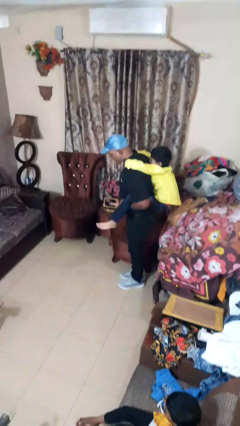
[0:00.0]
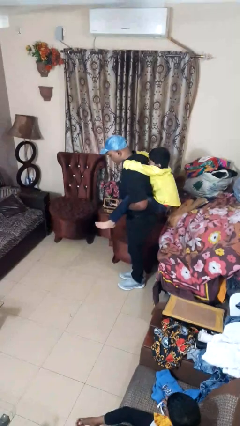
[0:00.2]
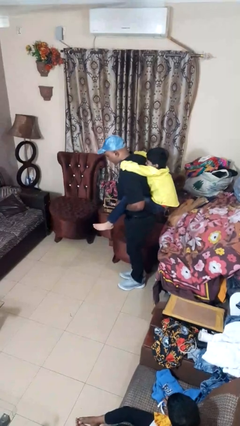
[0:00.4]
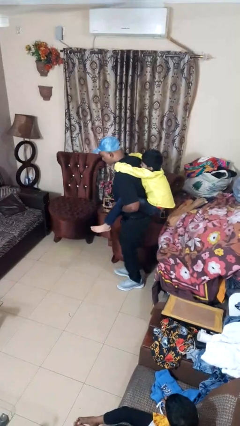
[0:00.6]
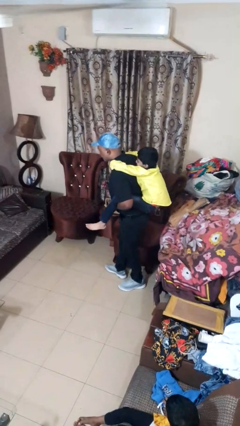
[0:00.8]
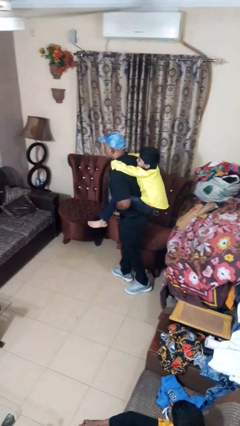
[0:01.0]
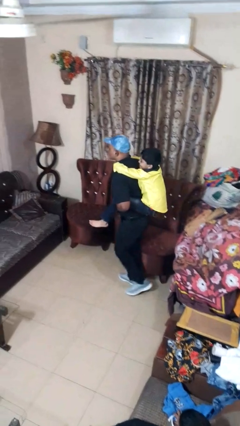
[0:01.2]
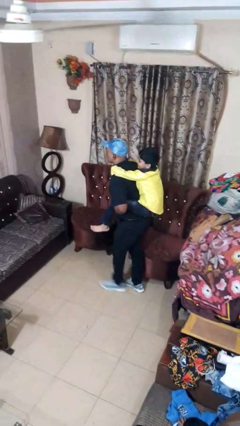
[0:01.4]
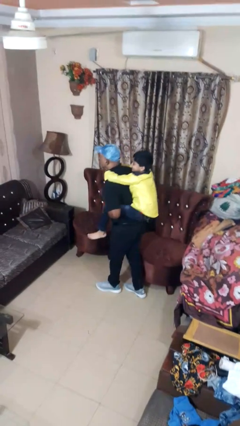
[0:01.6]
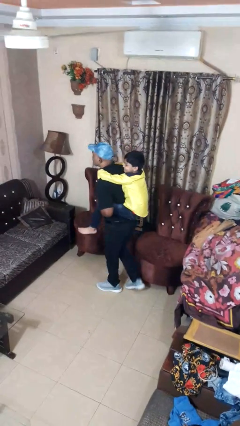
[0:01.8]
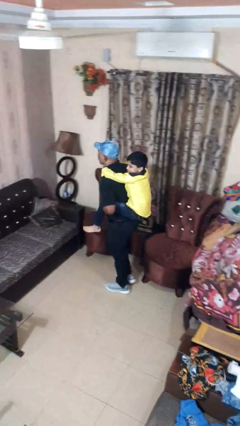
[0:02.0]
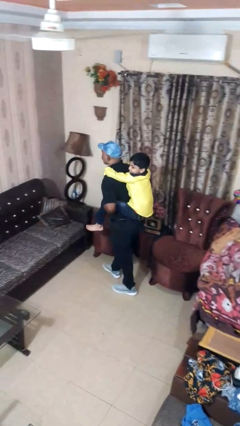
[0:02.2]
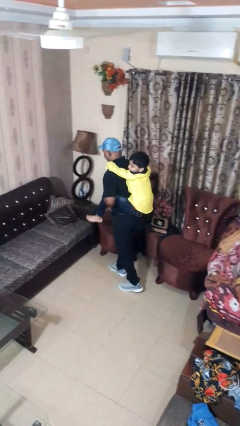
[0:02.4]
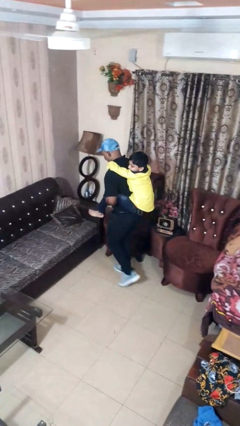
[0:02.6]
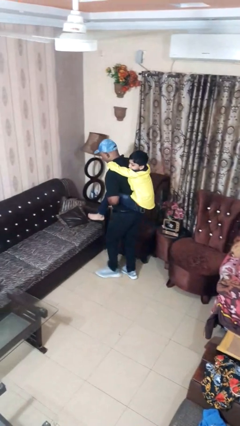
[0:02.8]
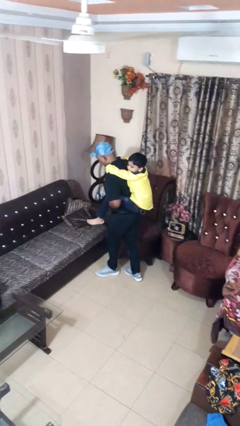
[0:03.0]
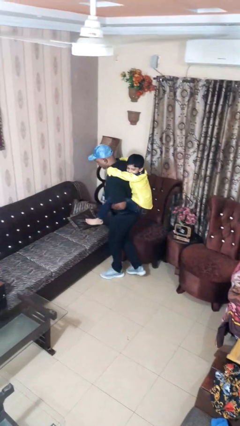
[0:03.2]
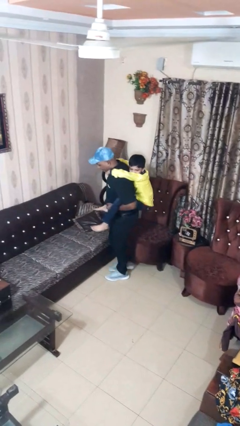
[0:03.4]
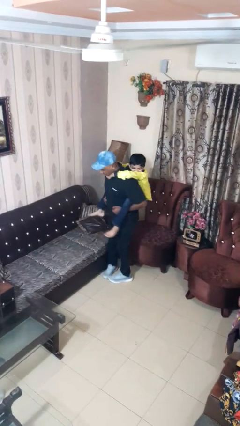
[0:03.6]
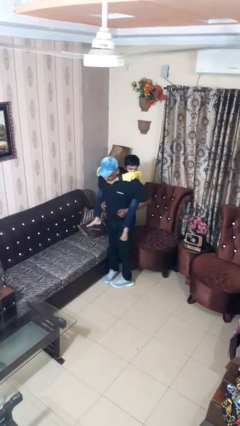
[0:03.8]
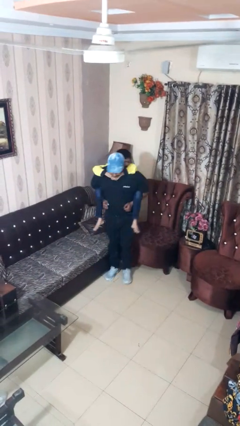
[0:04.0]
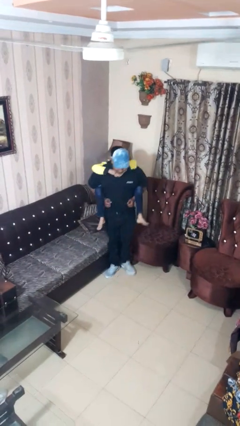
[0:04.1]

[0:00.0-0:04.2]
person carries person on back

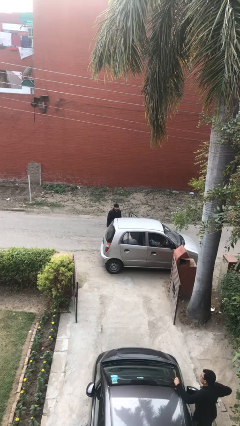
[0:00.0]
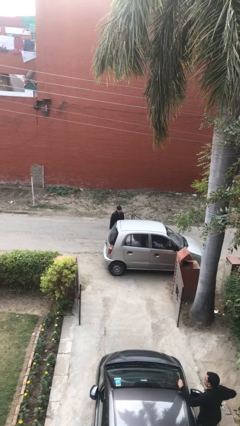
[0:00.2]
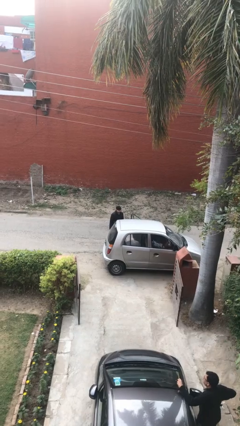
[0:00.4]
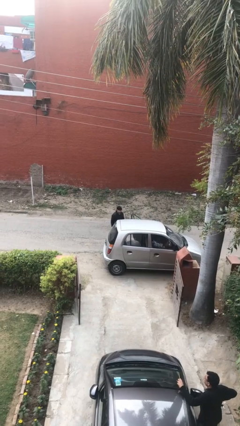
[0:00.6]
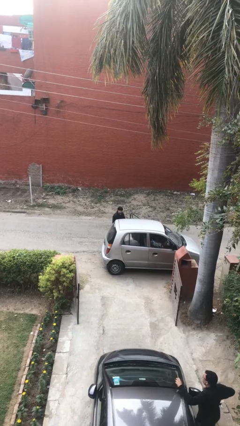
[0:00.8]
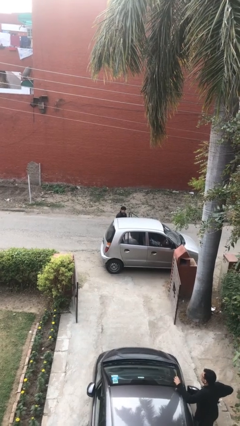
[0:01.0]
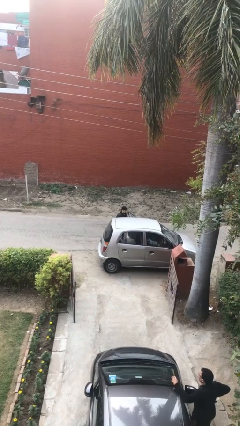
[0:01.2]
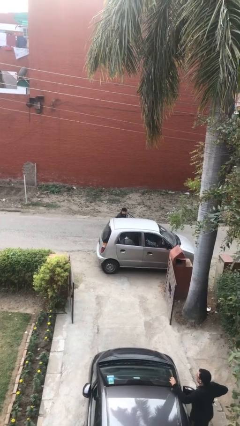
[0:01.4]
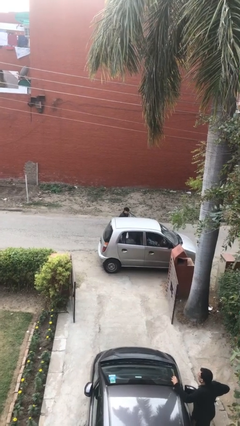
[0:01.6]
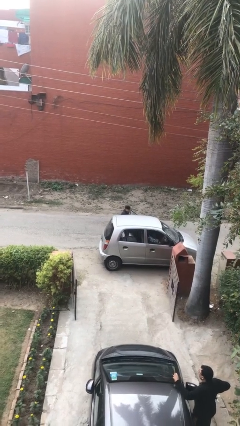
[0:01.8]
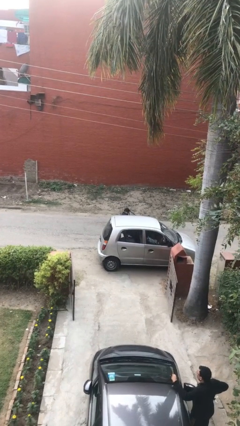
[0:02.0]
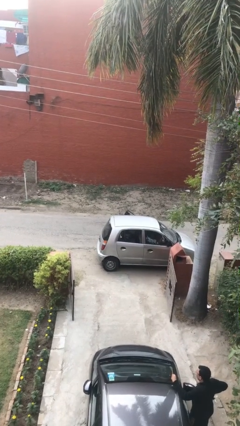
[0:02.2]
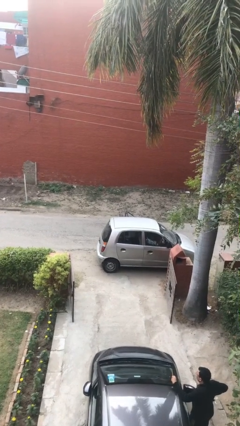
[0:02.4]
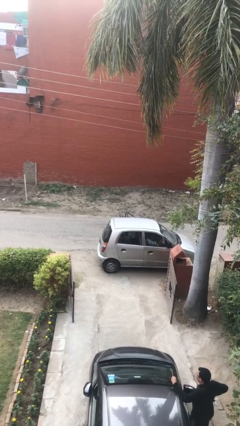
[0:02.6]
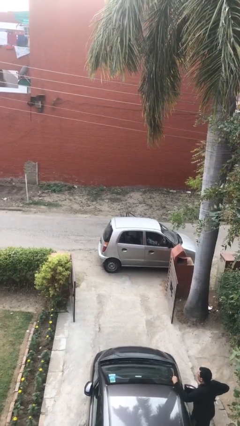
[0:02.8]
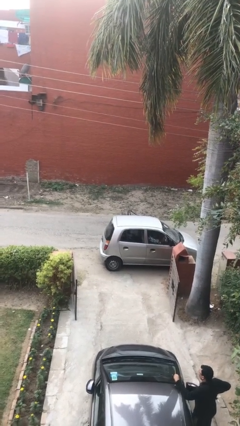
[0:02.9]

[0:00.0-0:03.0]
person enters car

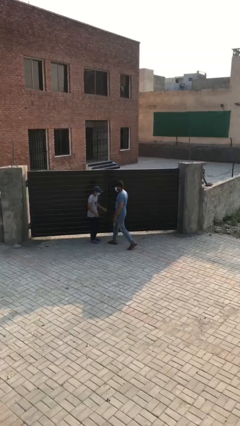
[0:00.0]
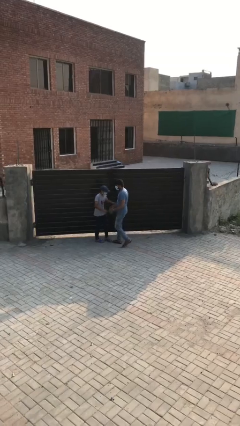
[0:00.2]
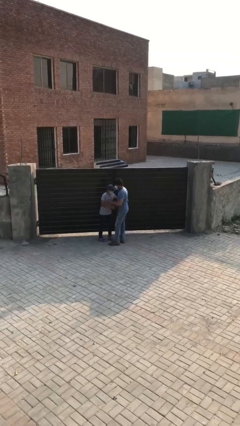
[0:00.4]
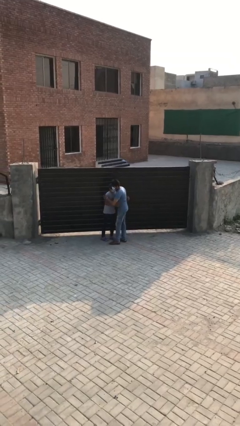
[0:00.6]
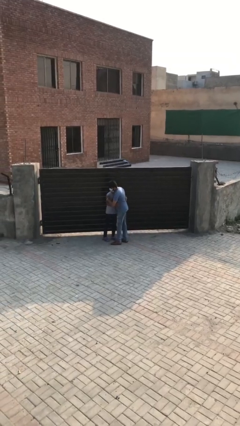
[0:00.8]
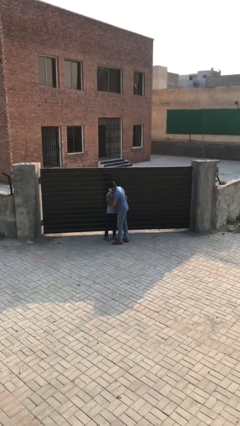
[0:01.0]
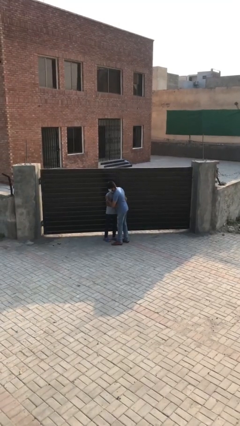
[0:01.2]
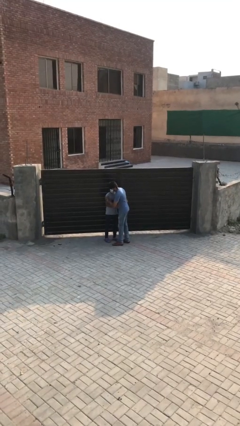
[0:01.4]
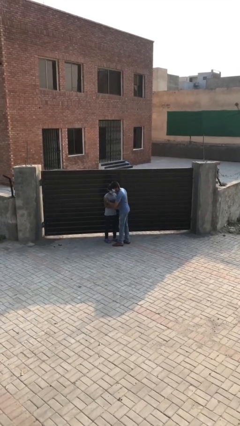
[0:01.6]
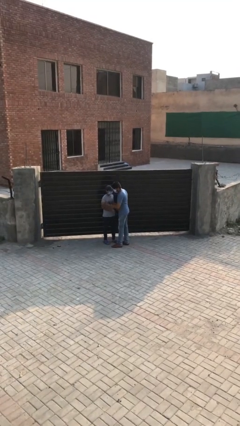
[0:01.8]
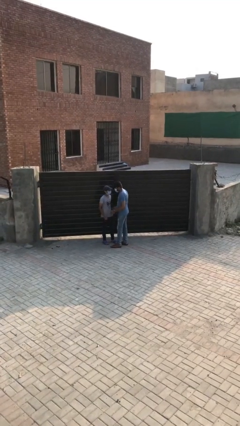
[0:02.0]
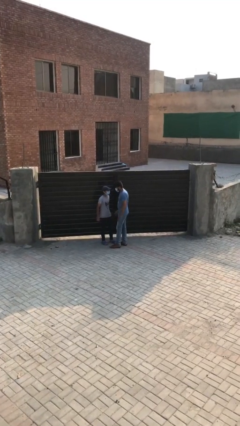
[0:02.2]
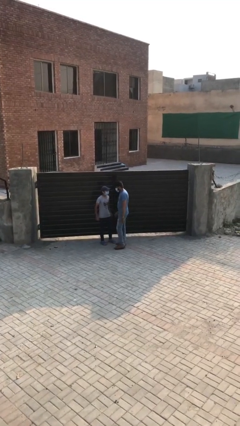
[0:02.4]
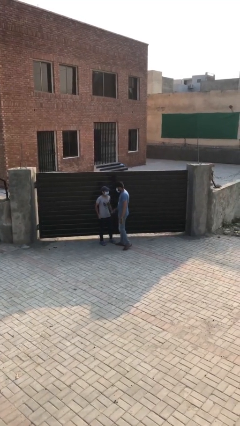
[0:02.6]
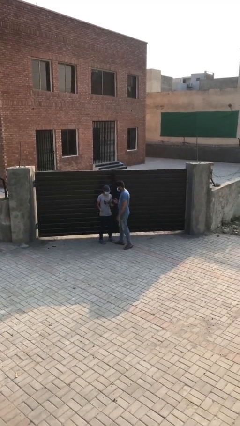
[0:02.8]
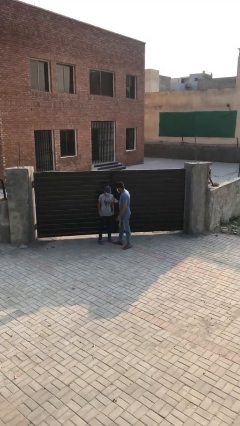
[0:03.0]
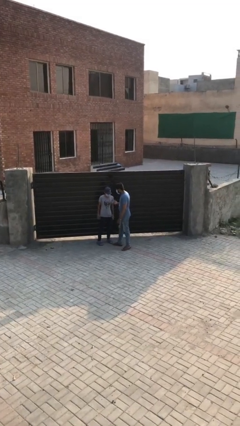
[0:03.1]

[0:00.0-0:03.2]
person embraces person

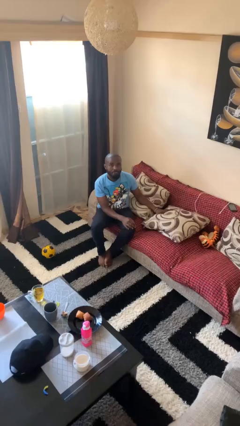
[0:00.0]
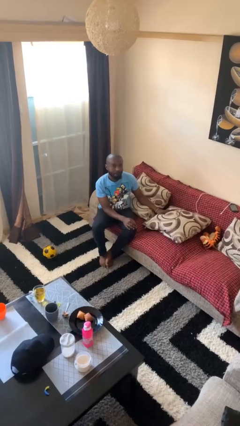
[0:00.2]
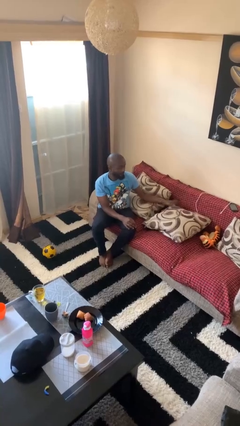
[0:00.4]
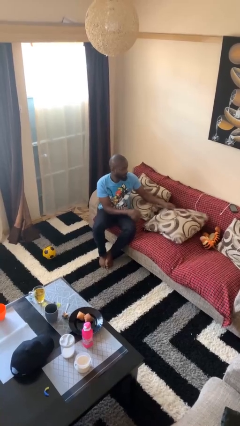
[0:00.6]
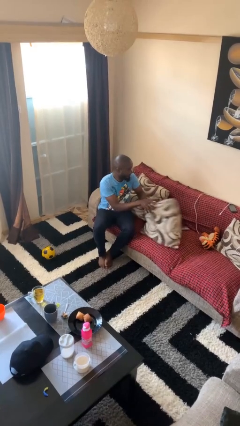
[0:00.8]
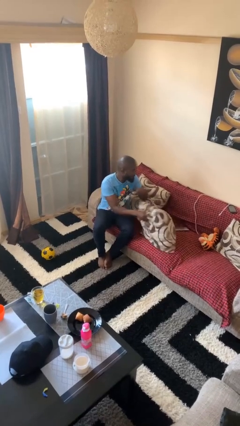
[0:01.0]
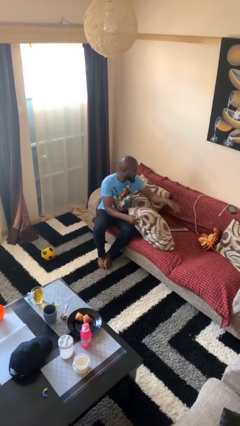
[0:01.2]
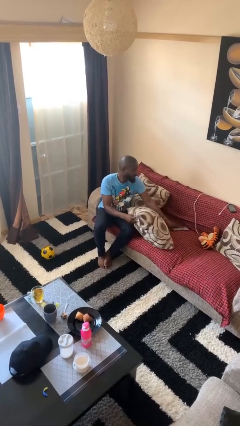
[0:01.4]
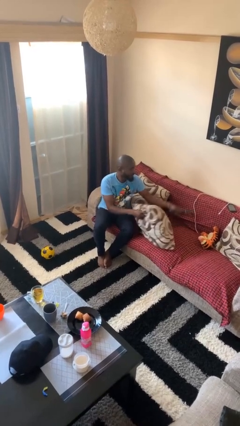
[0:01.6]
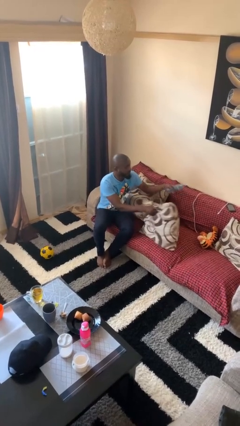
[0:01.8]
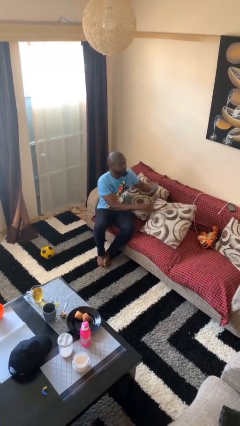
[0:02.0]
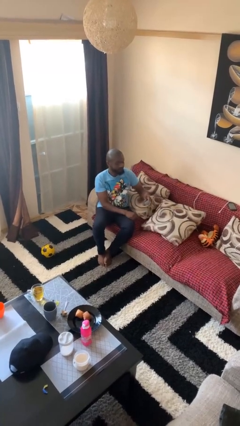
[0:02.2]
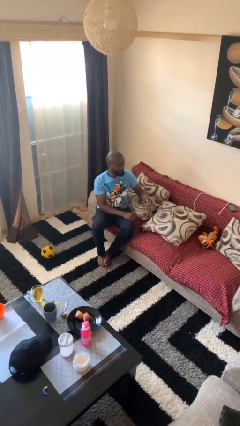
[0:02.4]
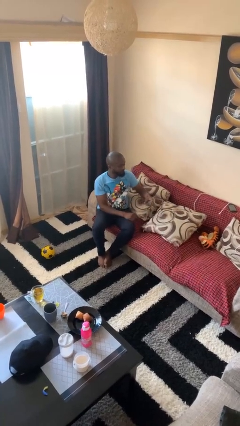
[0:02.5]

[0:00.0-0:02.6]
person searches in couch

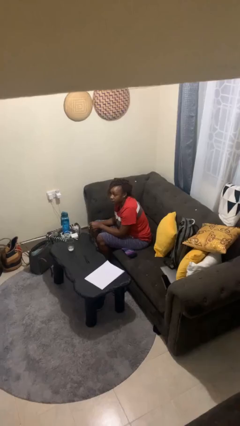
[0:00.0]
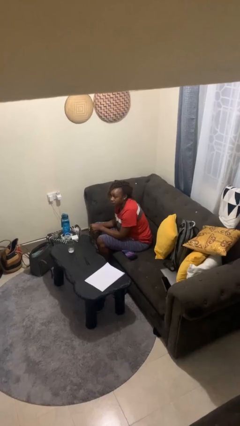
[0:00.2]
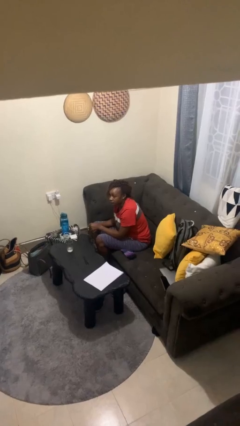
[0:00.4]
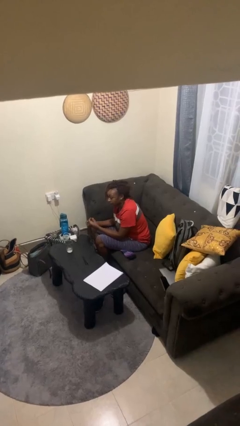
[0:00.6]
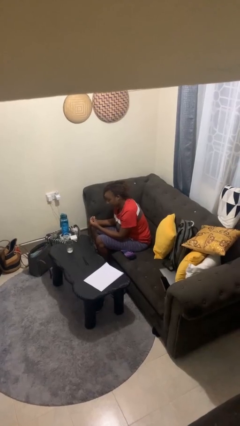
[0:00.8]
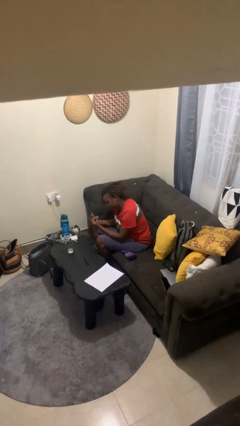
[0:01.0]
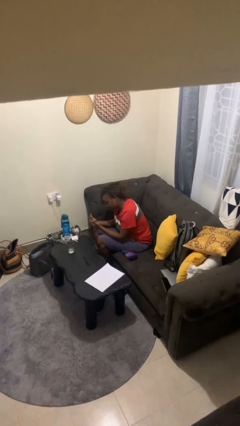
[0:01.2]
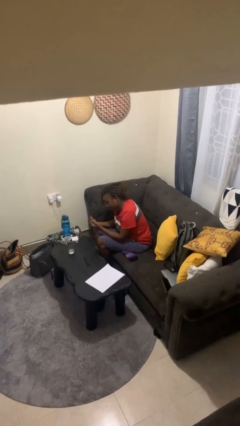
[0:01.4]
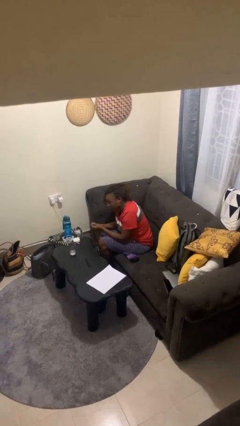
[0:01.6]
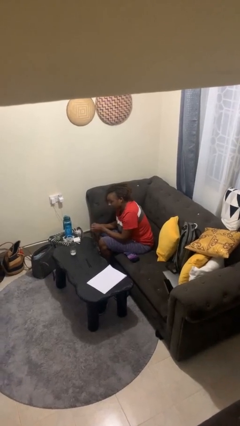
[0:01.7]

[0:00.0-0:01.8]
person snaps fingers

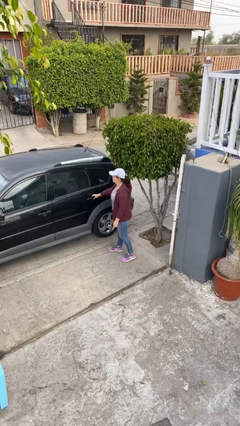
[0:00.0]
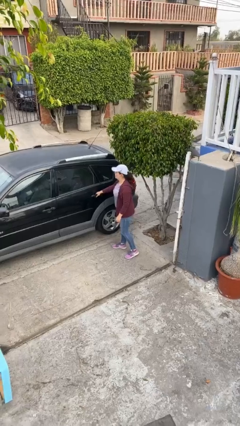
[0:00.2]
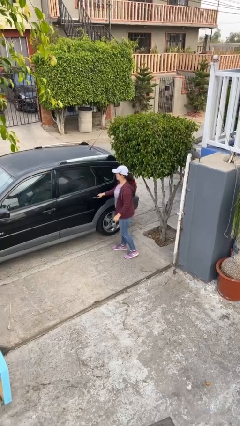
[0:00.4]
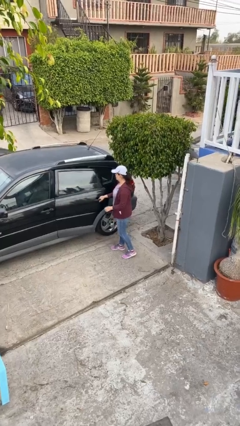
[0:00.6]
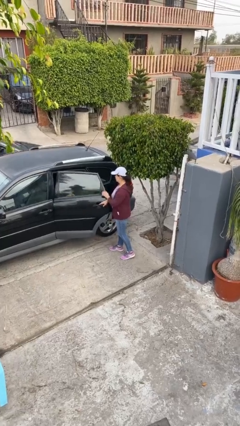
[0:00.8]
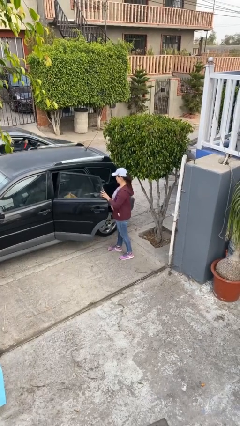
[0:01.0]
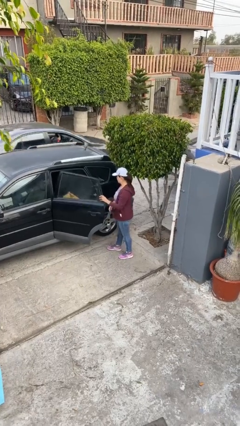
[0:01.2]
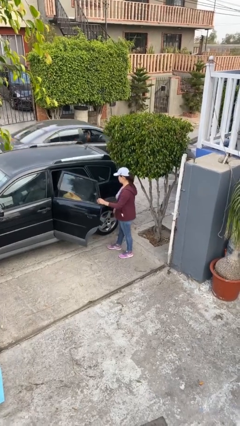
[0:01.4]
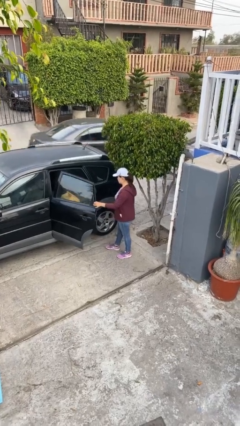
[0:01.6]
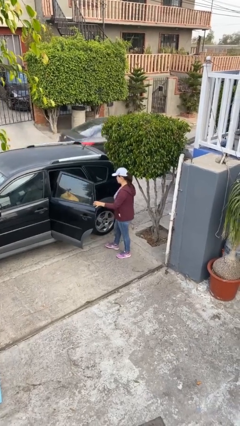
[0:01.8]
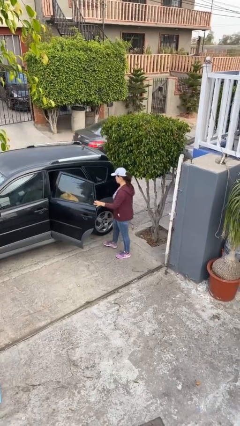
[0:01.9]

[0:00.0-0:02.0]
person opens car door

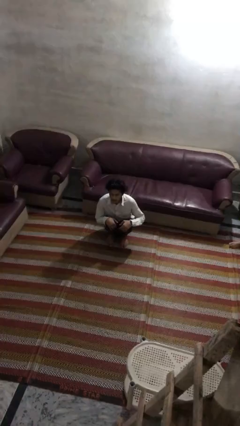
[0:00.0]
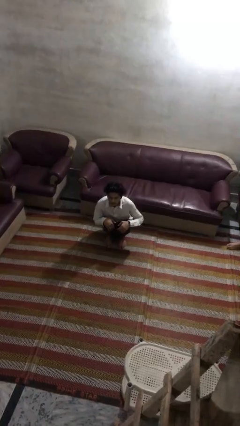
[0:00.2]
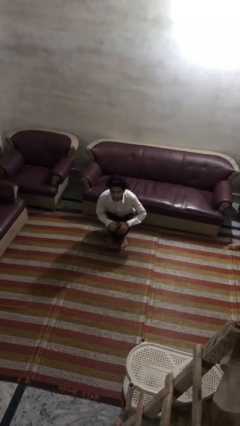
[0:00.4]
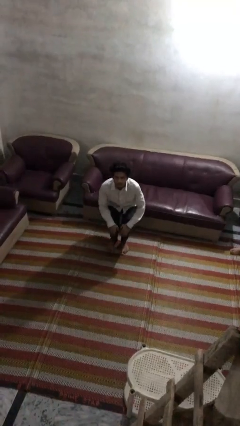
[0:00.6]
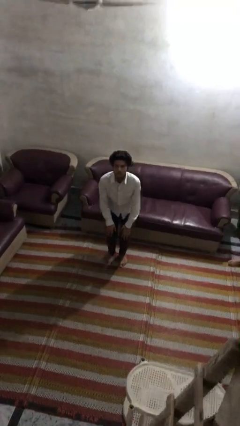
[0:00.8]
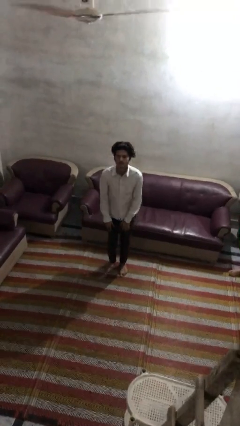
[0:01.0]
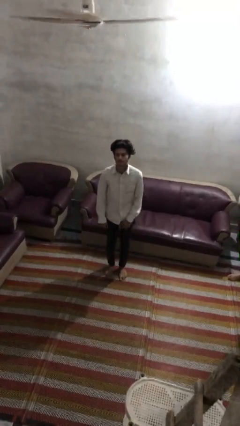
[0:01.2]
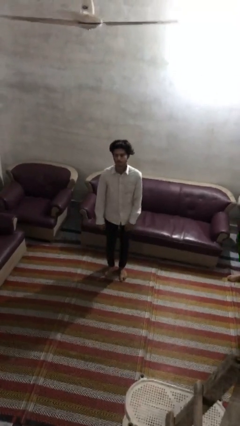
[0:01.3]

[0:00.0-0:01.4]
person stands up
